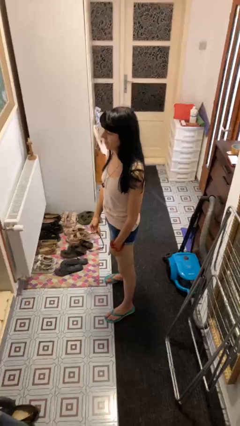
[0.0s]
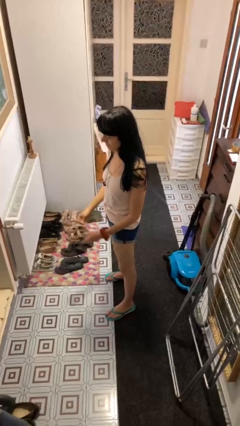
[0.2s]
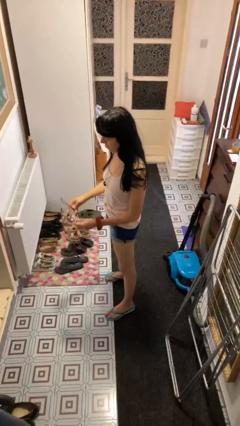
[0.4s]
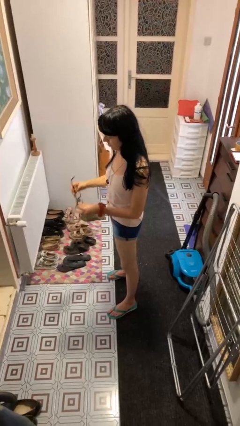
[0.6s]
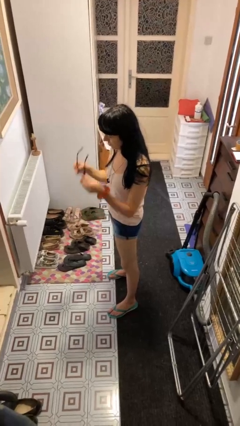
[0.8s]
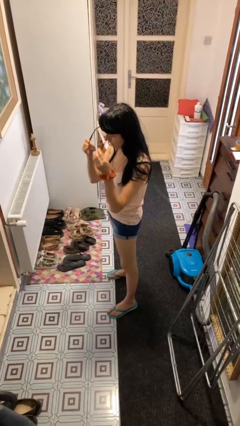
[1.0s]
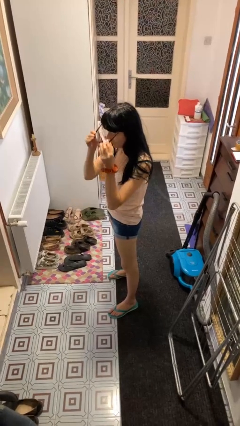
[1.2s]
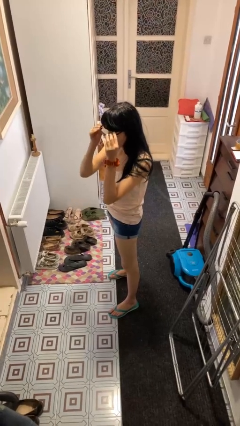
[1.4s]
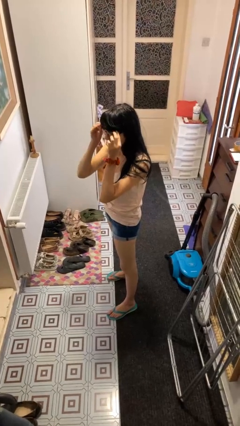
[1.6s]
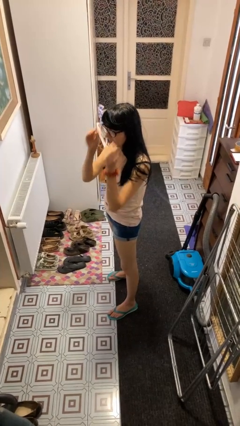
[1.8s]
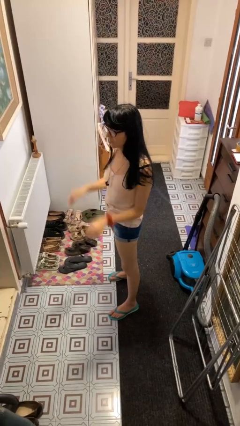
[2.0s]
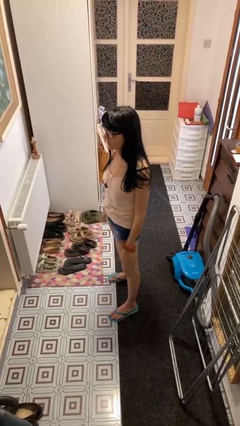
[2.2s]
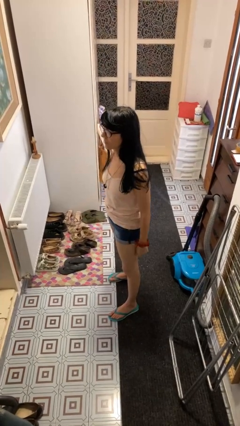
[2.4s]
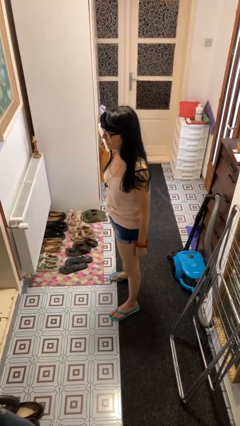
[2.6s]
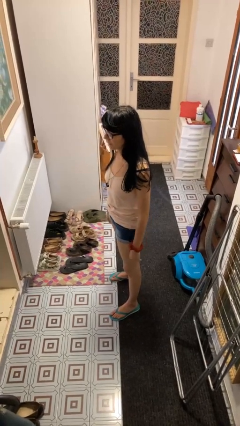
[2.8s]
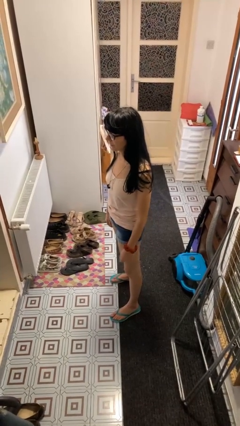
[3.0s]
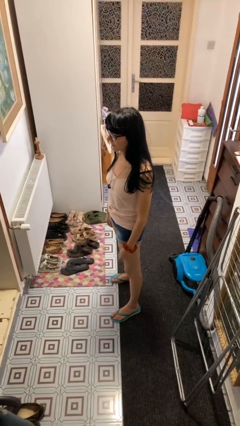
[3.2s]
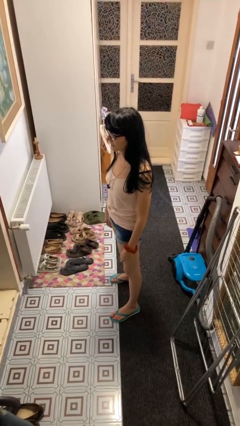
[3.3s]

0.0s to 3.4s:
person puts on glasses

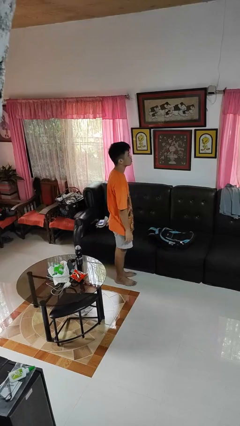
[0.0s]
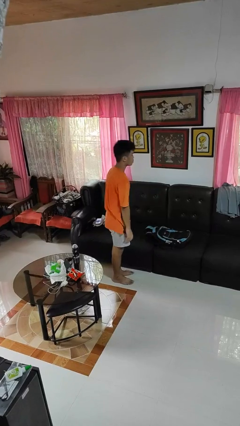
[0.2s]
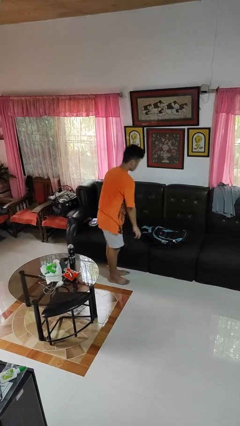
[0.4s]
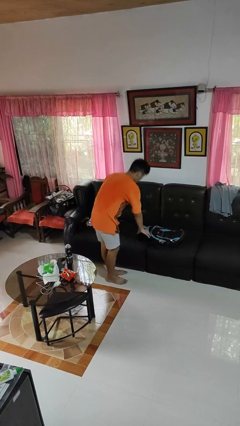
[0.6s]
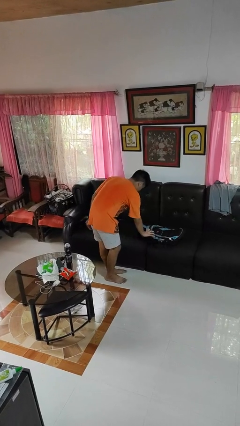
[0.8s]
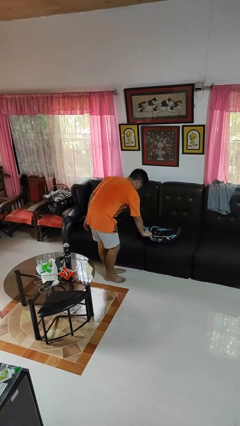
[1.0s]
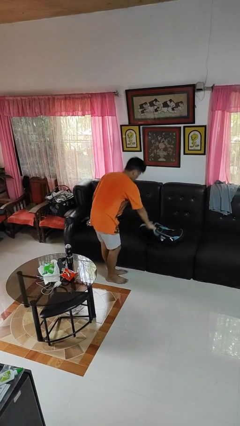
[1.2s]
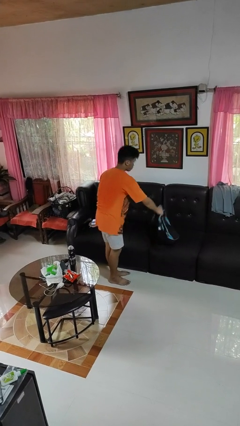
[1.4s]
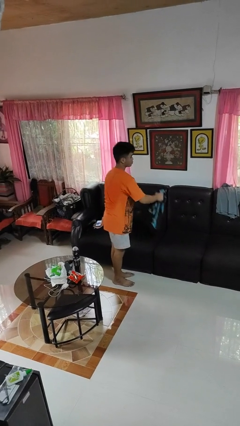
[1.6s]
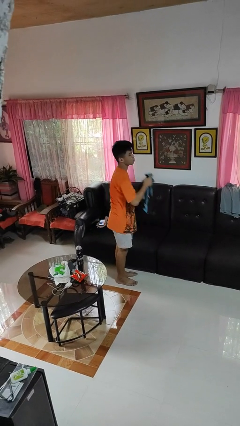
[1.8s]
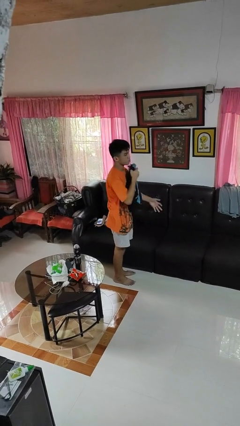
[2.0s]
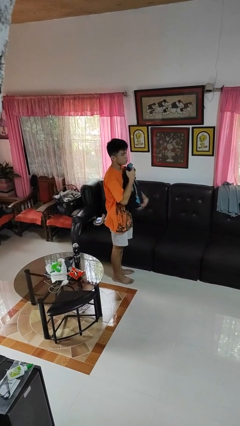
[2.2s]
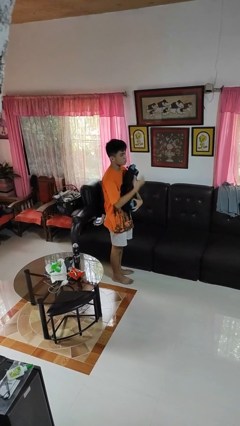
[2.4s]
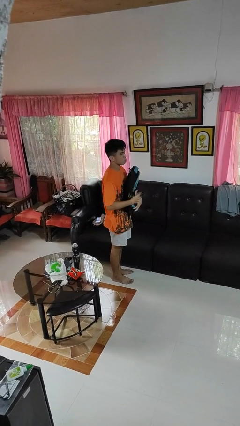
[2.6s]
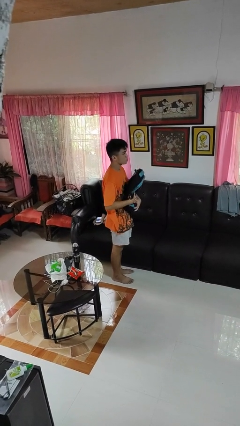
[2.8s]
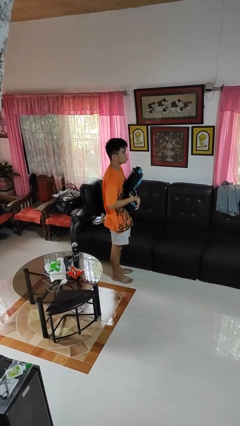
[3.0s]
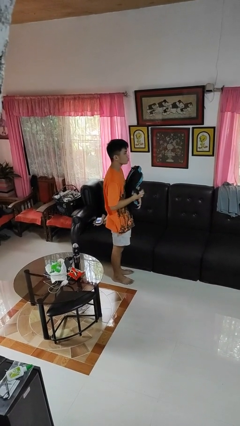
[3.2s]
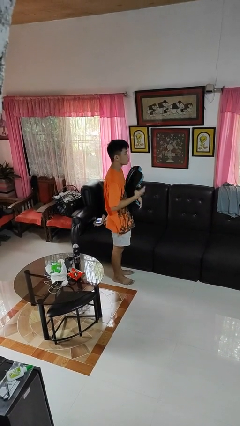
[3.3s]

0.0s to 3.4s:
person picks up object from couch

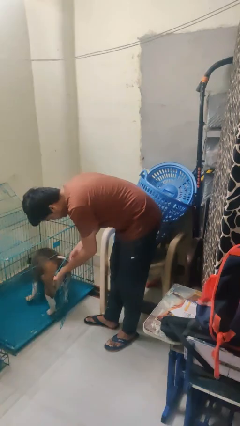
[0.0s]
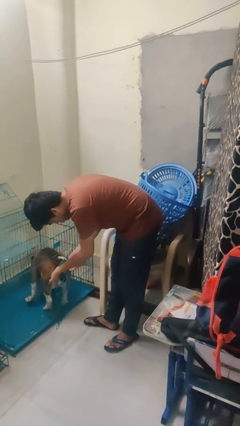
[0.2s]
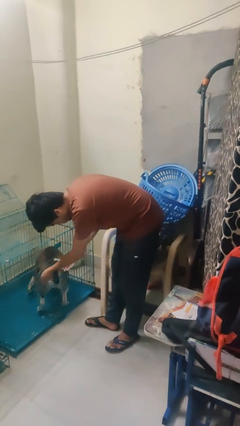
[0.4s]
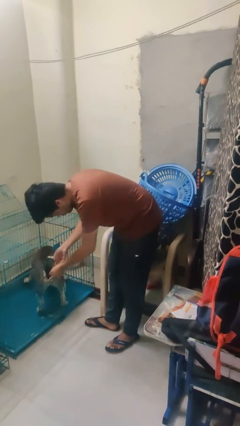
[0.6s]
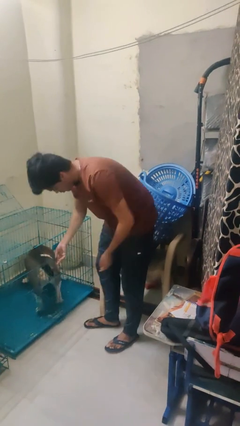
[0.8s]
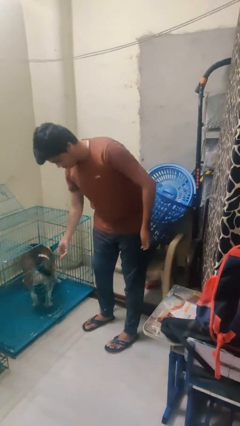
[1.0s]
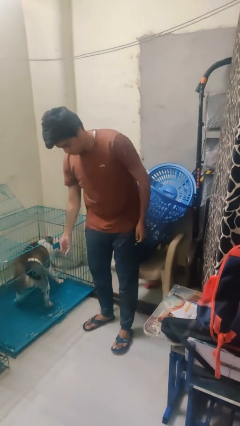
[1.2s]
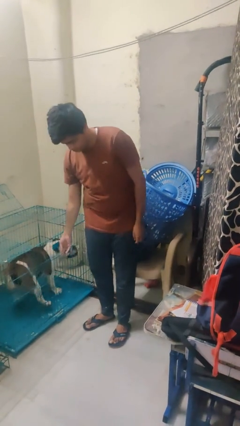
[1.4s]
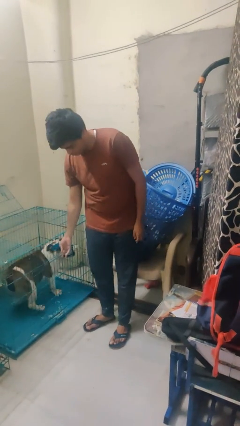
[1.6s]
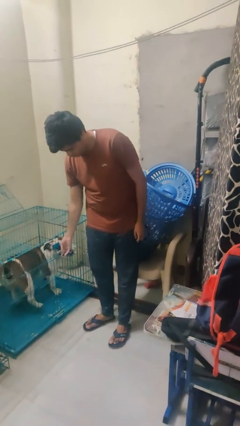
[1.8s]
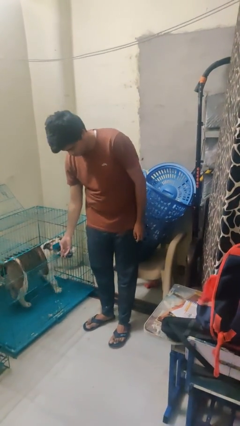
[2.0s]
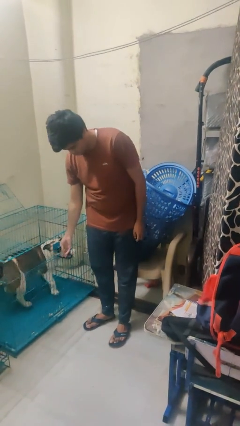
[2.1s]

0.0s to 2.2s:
person crates dog

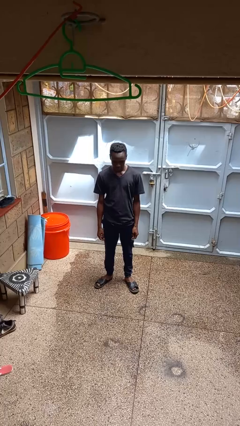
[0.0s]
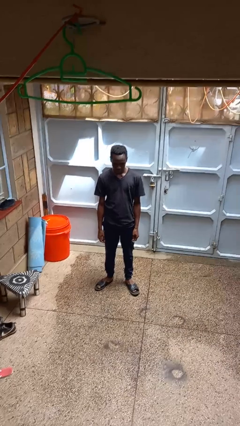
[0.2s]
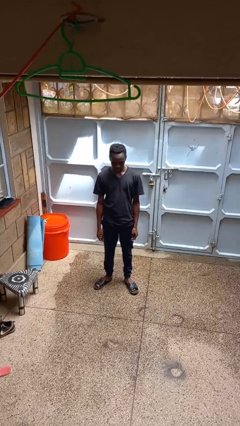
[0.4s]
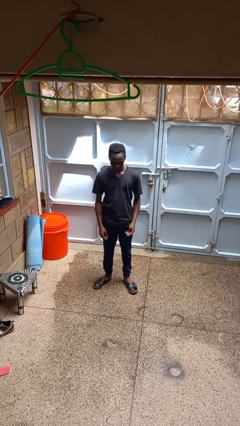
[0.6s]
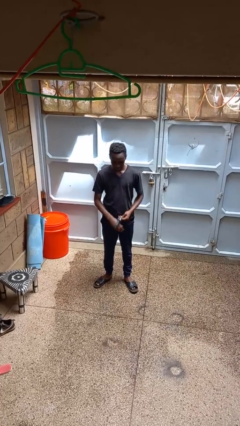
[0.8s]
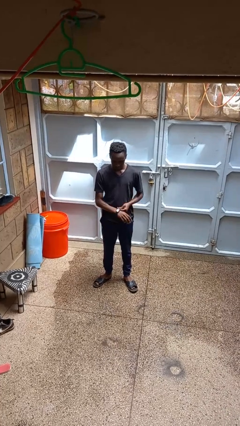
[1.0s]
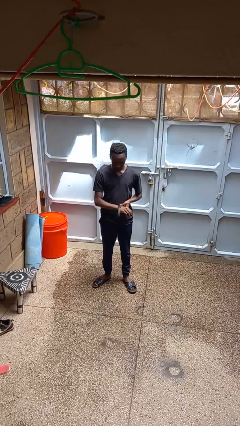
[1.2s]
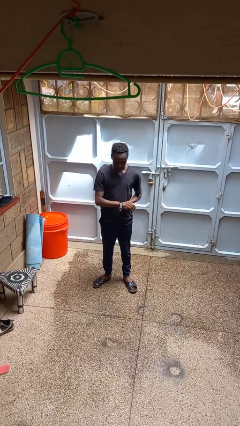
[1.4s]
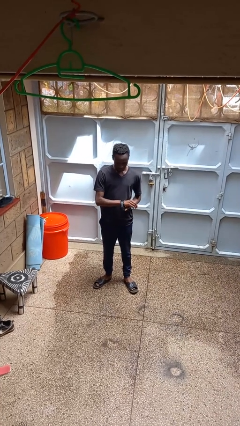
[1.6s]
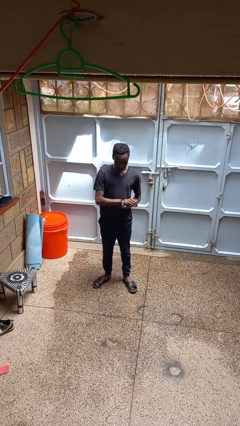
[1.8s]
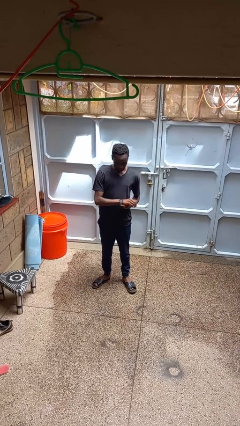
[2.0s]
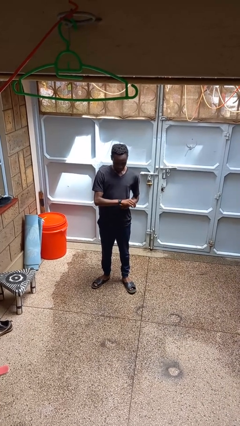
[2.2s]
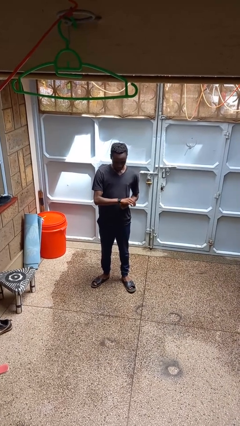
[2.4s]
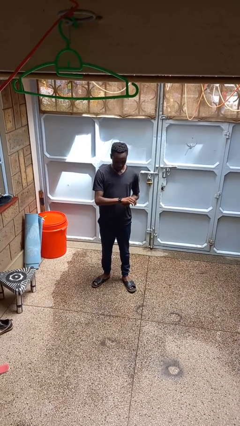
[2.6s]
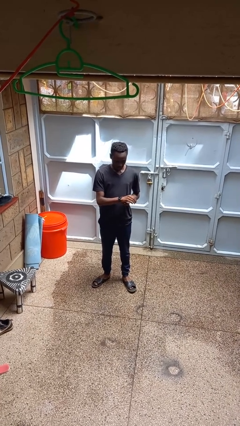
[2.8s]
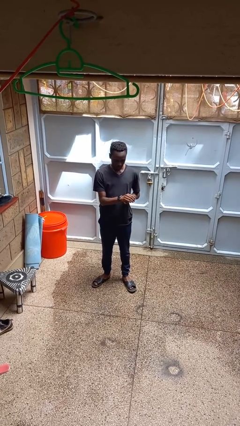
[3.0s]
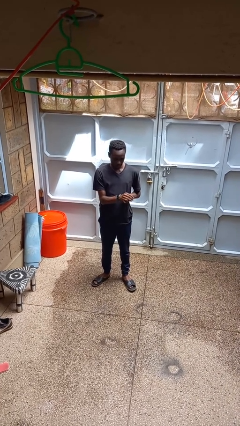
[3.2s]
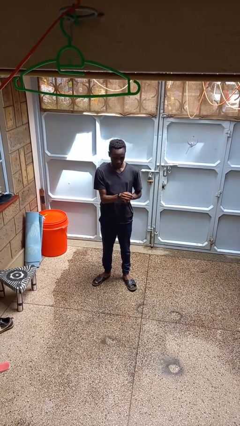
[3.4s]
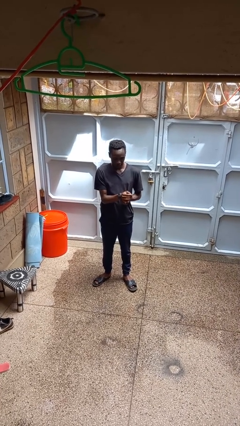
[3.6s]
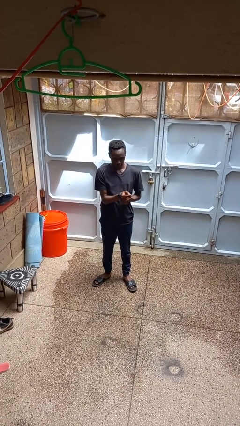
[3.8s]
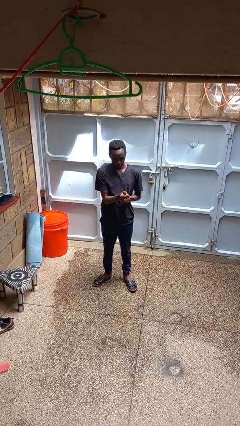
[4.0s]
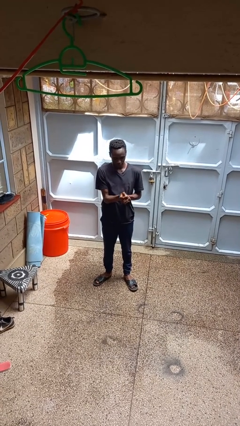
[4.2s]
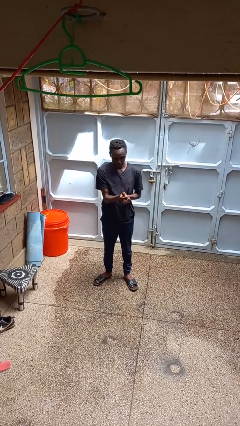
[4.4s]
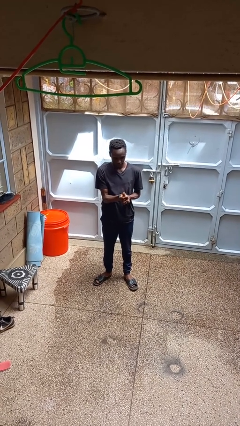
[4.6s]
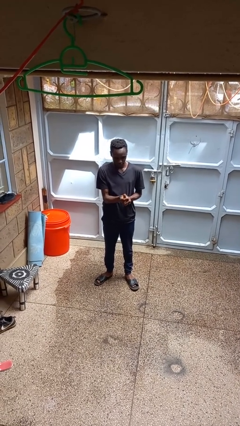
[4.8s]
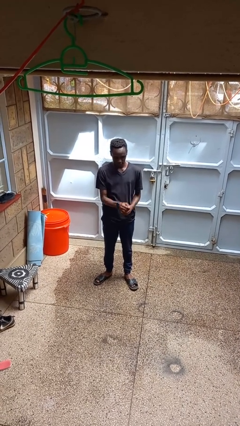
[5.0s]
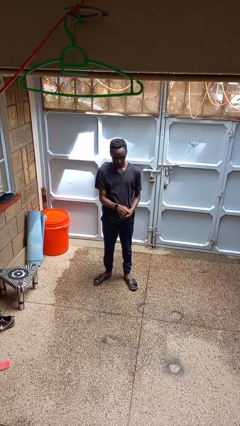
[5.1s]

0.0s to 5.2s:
person puts on wristwatch

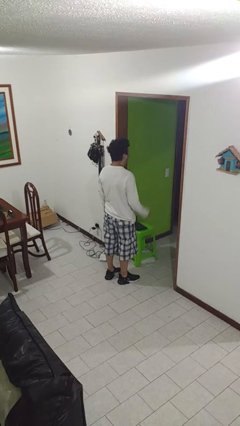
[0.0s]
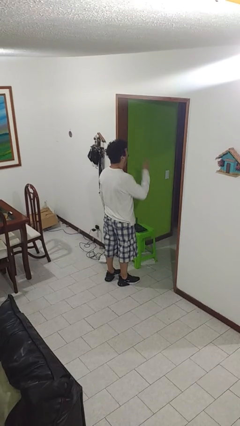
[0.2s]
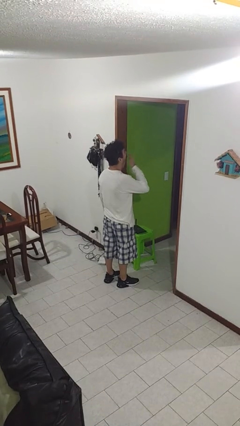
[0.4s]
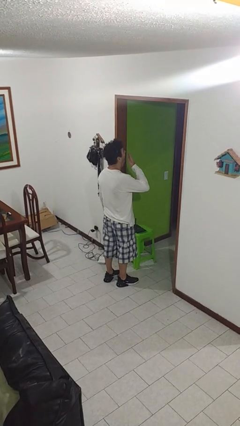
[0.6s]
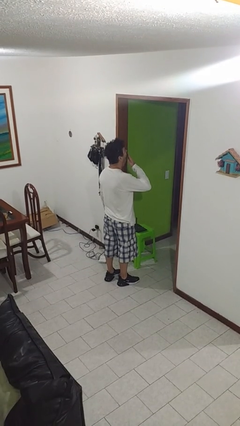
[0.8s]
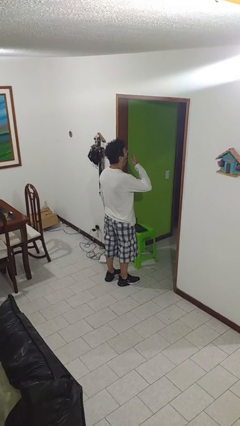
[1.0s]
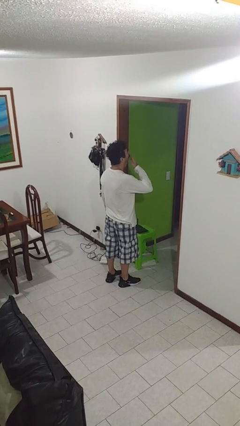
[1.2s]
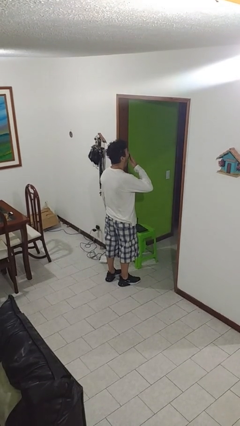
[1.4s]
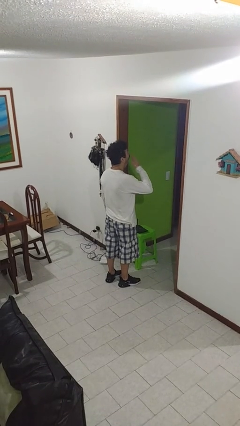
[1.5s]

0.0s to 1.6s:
person yawns

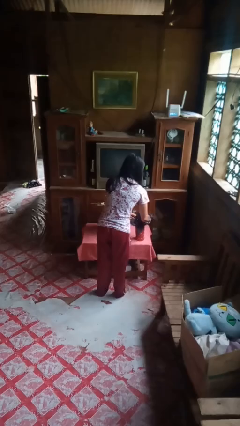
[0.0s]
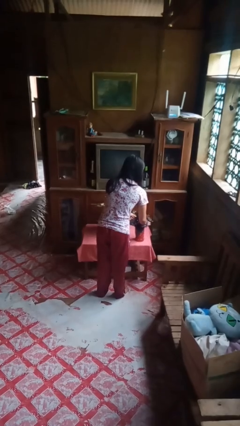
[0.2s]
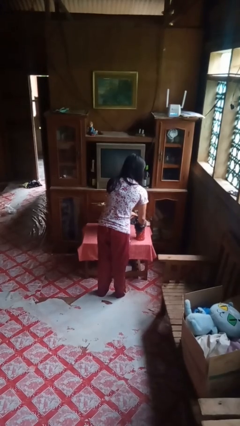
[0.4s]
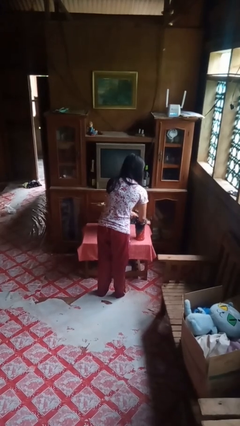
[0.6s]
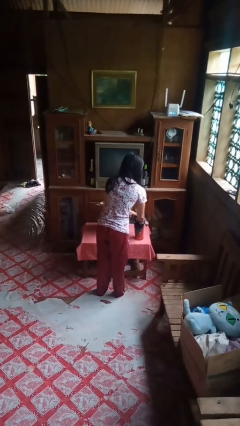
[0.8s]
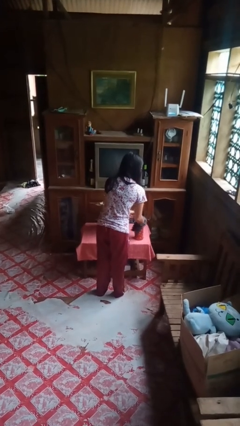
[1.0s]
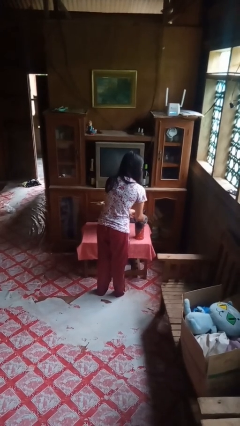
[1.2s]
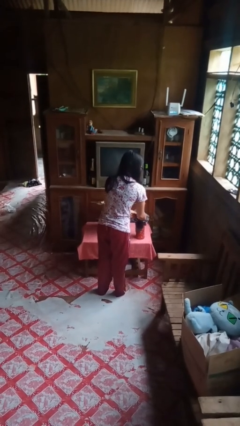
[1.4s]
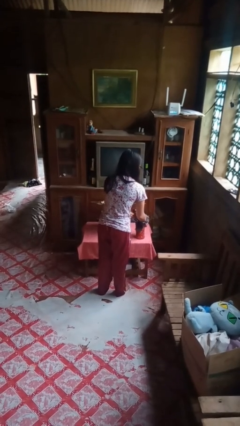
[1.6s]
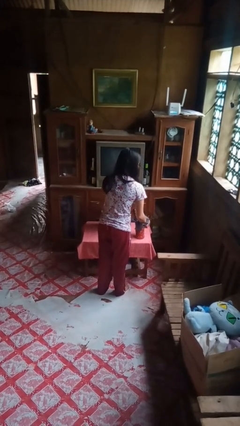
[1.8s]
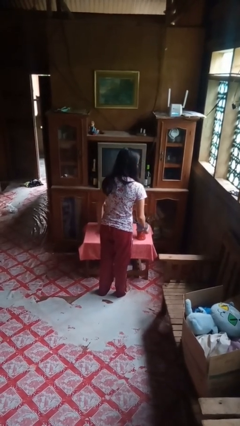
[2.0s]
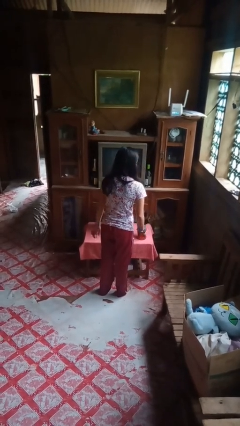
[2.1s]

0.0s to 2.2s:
person arranges flowers in vase
